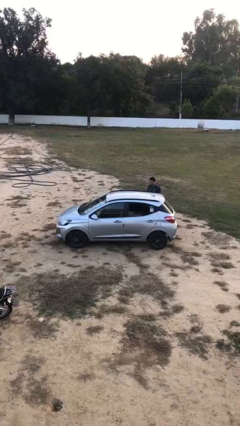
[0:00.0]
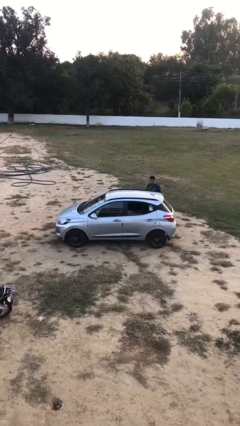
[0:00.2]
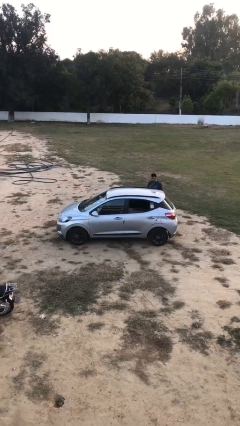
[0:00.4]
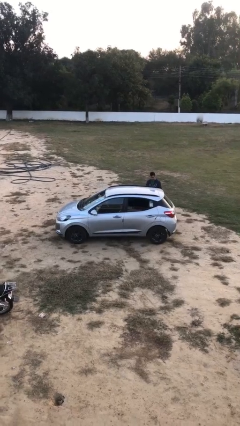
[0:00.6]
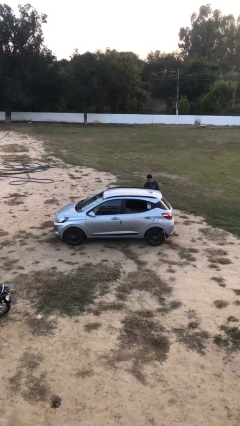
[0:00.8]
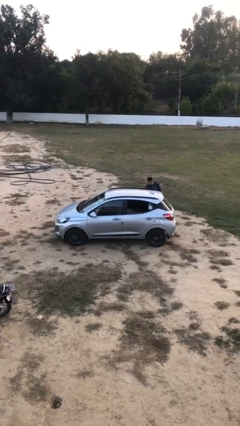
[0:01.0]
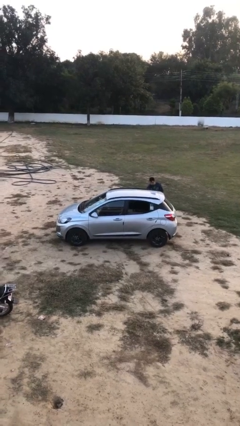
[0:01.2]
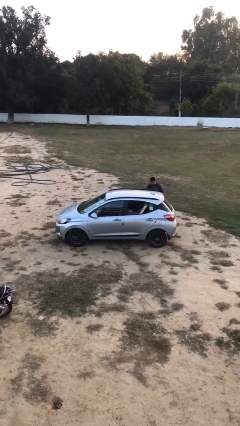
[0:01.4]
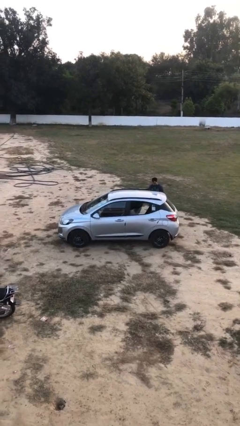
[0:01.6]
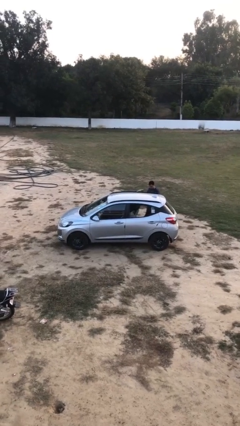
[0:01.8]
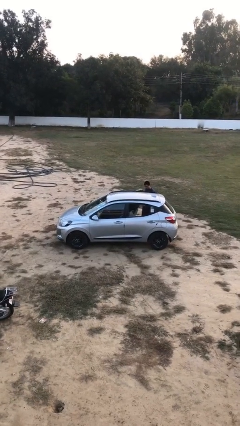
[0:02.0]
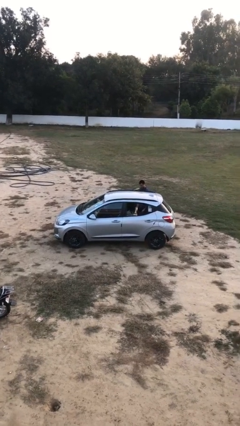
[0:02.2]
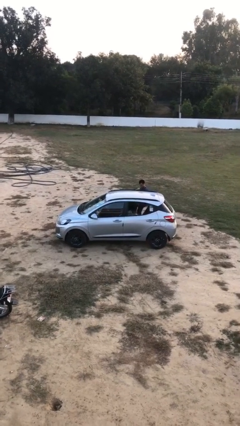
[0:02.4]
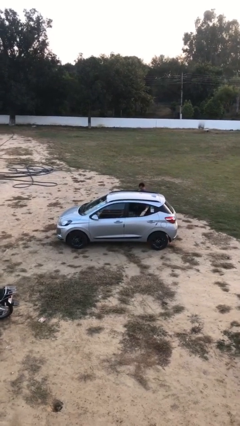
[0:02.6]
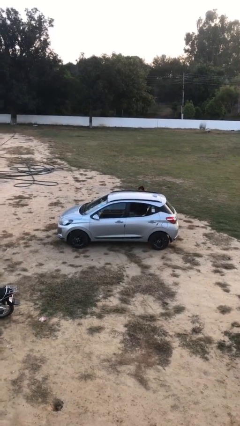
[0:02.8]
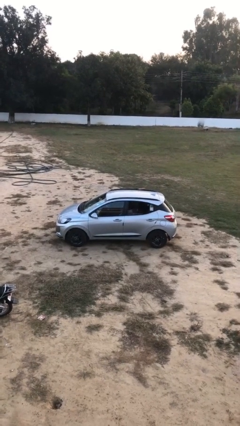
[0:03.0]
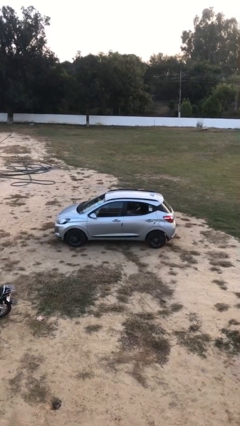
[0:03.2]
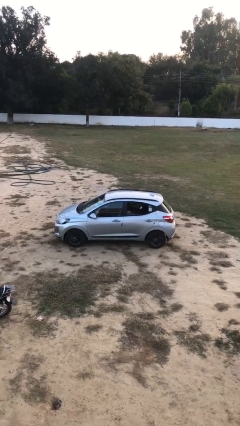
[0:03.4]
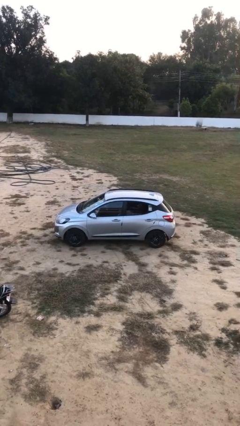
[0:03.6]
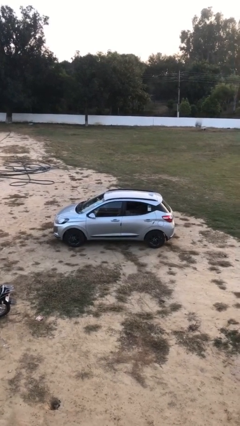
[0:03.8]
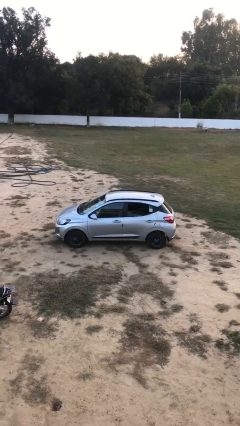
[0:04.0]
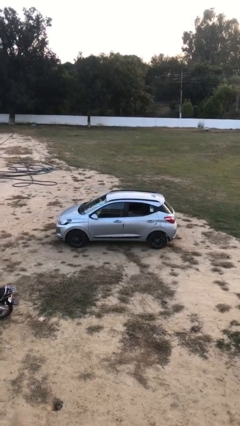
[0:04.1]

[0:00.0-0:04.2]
car picks up person

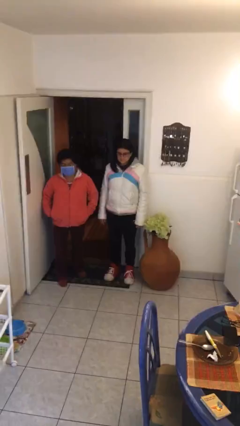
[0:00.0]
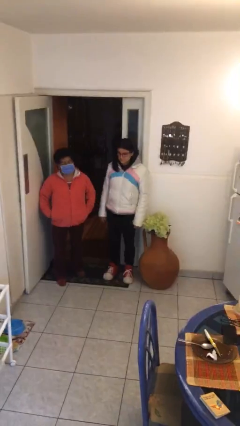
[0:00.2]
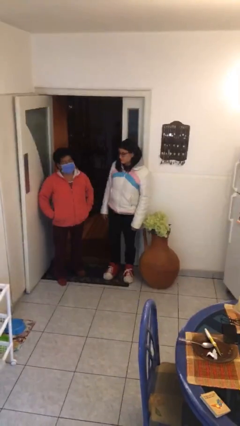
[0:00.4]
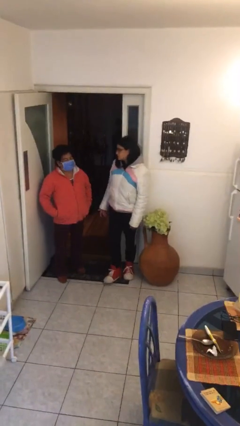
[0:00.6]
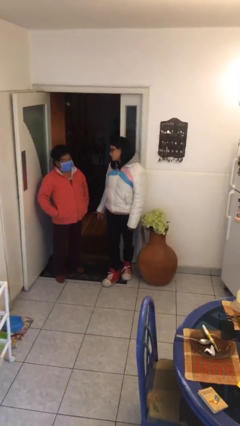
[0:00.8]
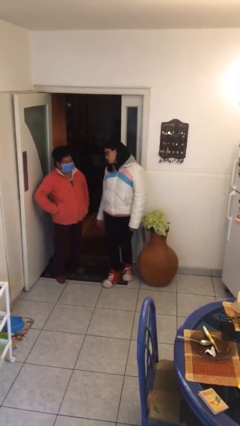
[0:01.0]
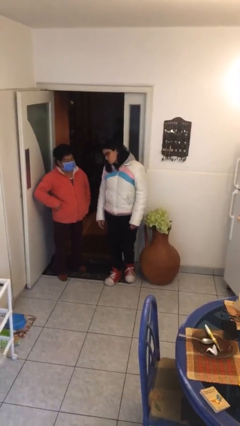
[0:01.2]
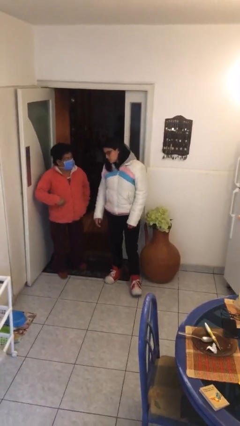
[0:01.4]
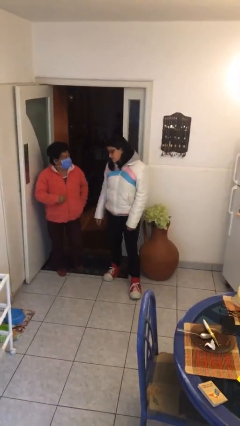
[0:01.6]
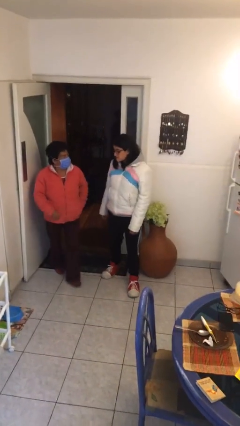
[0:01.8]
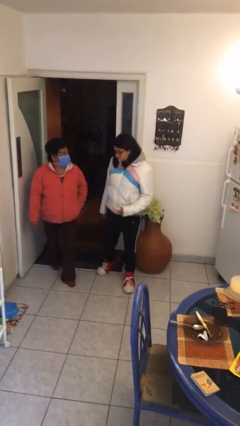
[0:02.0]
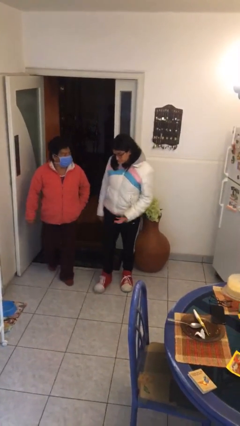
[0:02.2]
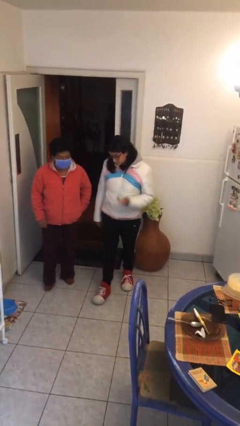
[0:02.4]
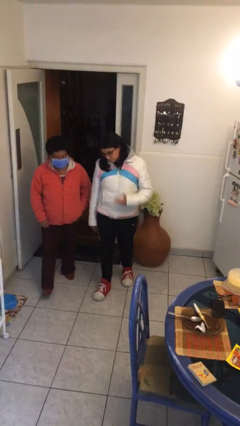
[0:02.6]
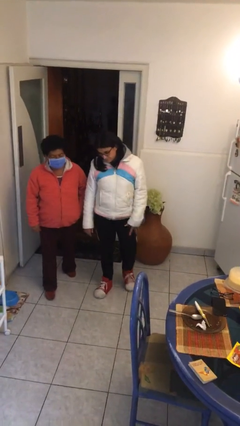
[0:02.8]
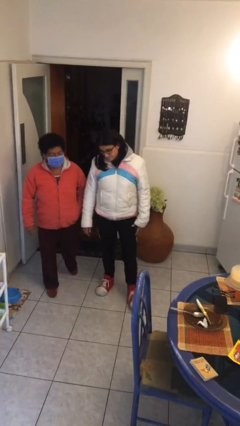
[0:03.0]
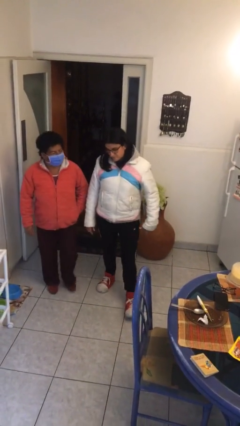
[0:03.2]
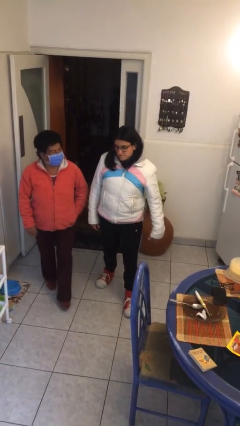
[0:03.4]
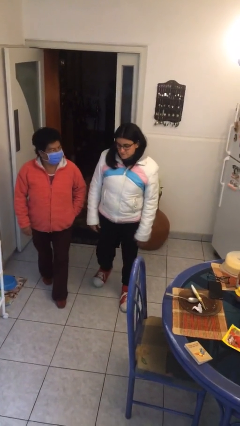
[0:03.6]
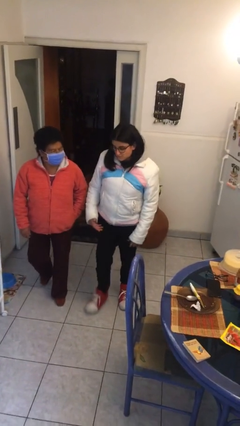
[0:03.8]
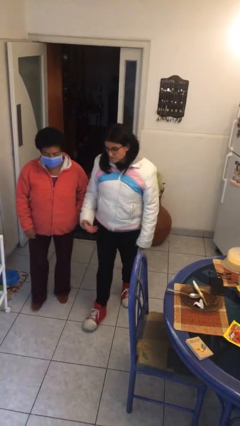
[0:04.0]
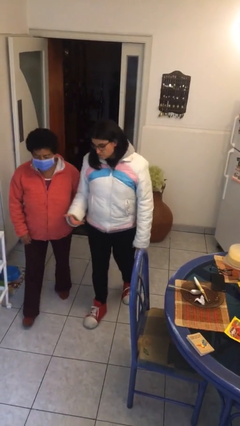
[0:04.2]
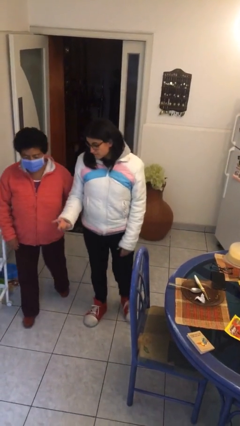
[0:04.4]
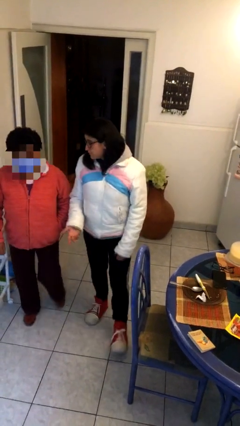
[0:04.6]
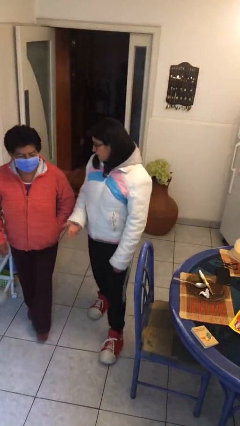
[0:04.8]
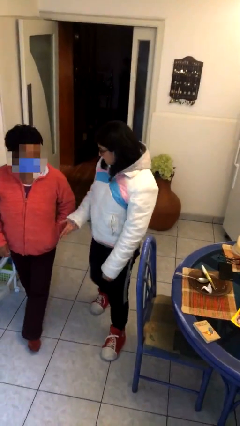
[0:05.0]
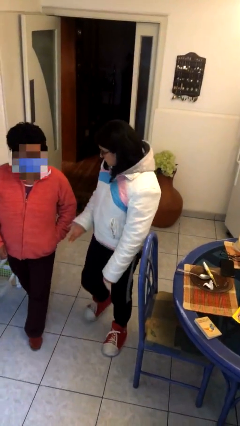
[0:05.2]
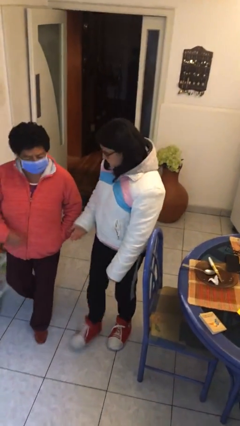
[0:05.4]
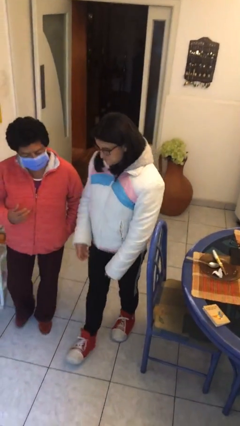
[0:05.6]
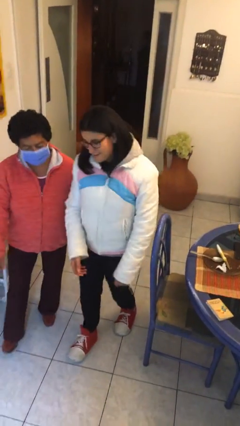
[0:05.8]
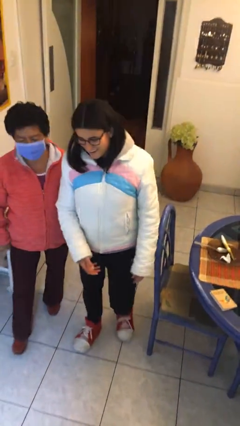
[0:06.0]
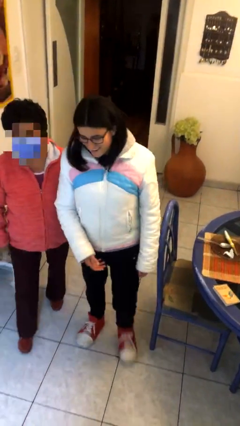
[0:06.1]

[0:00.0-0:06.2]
person talks to person

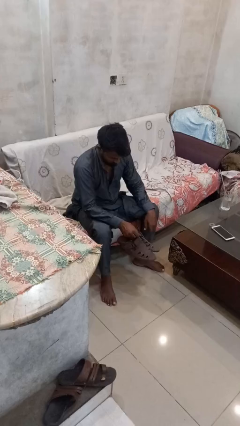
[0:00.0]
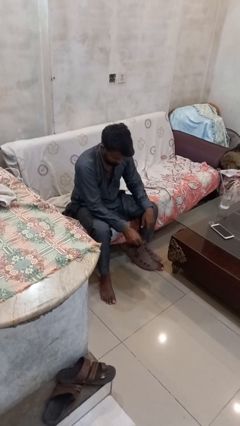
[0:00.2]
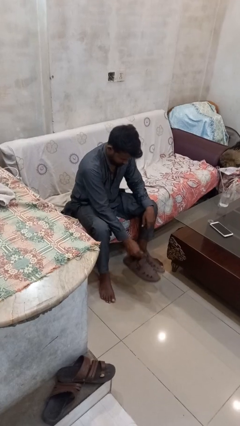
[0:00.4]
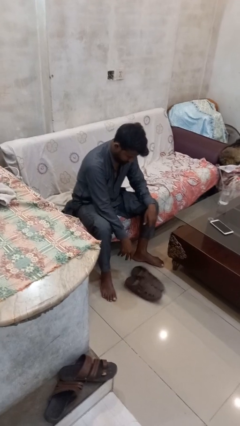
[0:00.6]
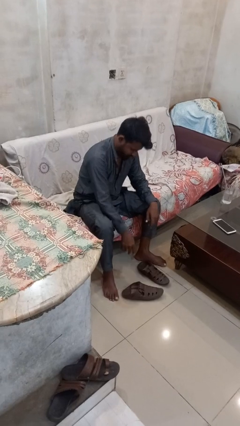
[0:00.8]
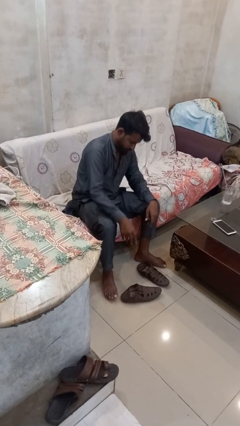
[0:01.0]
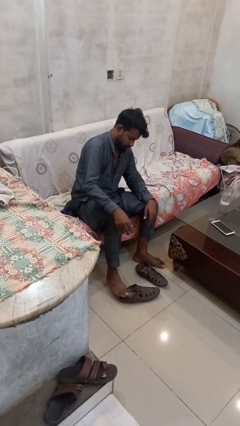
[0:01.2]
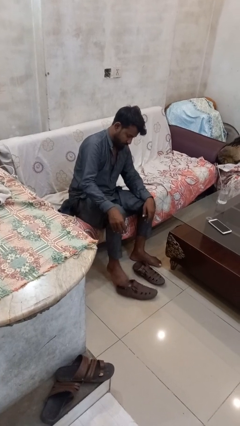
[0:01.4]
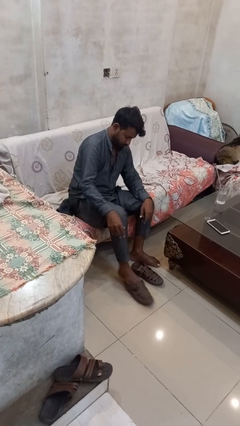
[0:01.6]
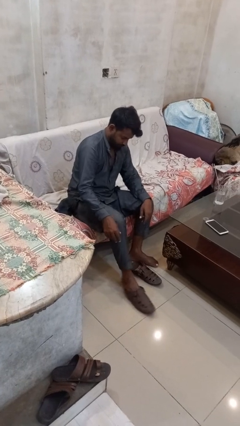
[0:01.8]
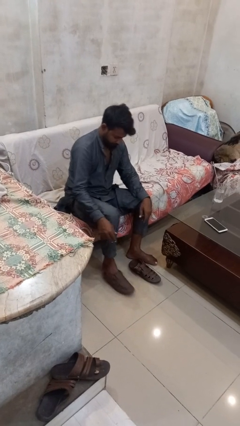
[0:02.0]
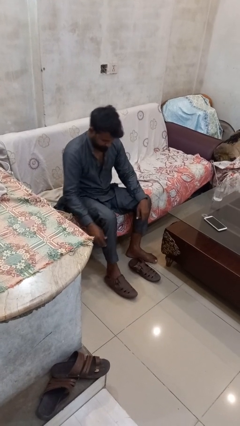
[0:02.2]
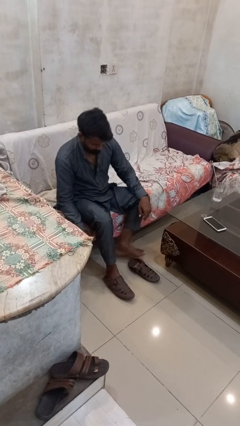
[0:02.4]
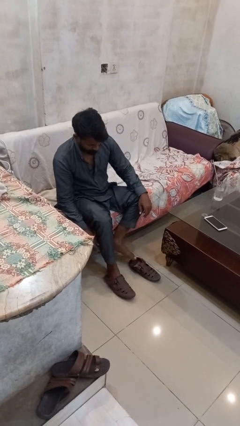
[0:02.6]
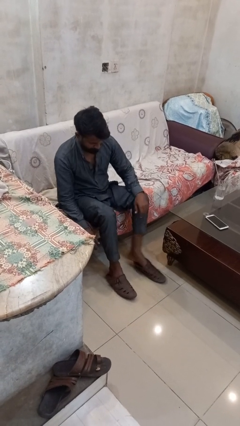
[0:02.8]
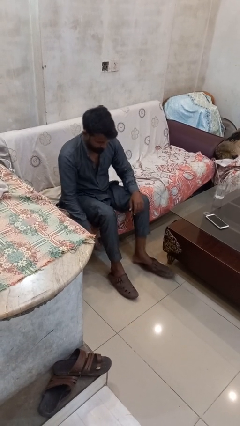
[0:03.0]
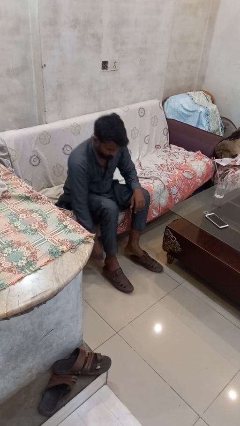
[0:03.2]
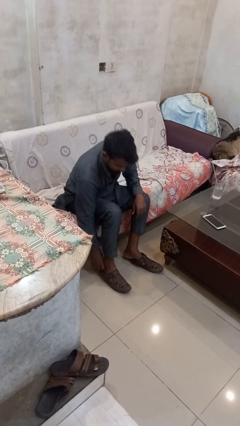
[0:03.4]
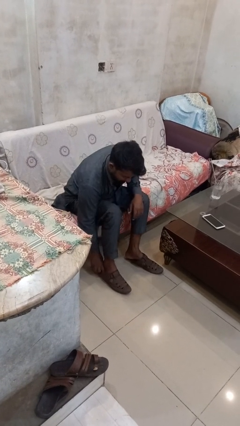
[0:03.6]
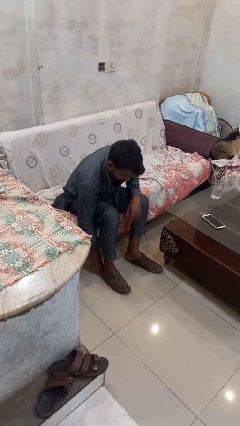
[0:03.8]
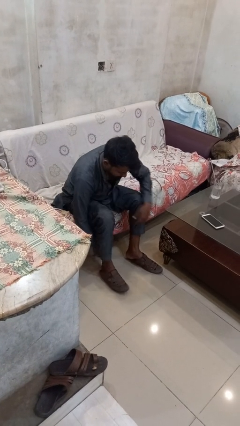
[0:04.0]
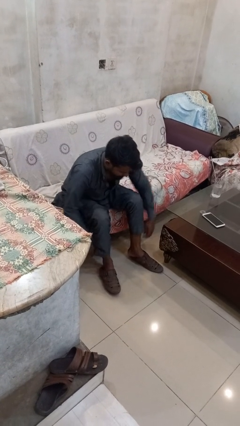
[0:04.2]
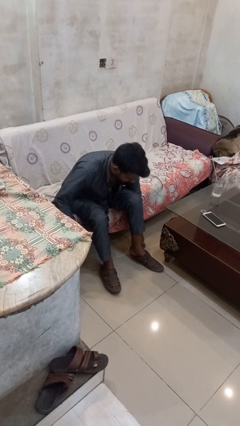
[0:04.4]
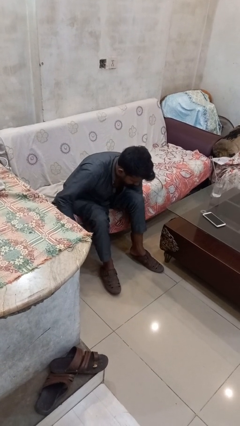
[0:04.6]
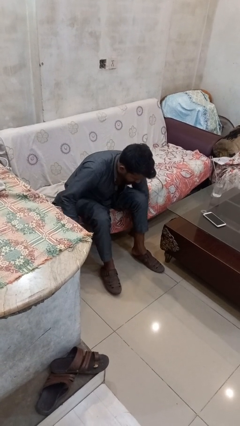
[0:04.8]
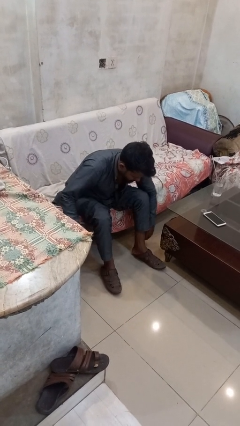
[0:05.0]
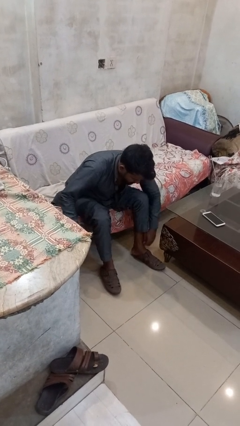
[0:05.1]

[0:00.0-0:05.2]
person puts on shoes

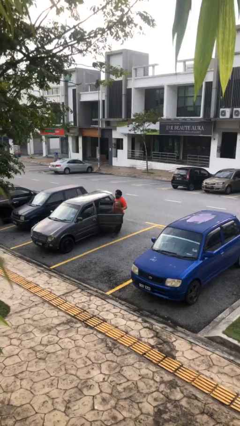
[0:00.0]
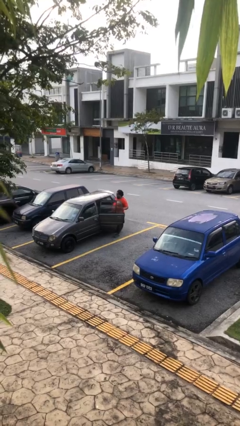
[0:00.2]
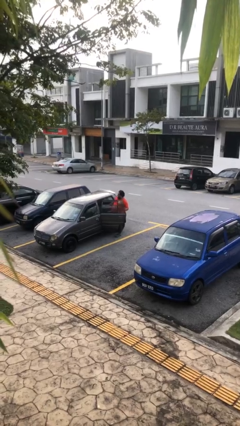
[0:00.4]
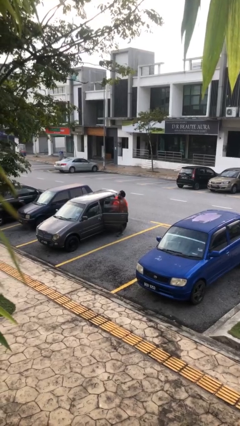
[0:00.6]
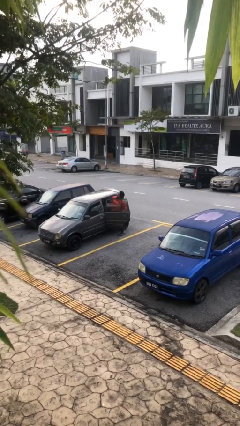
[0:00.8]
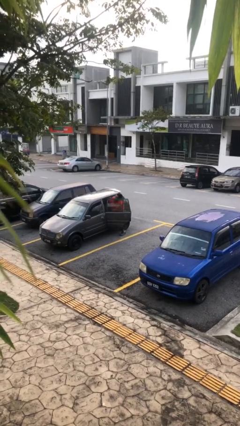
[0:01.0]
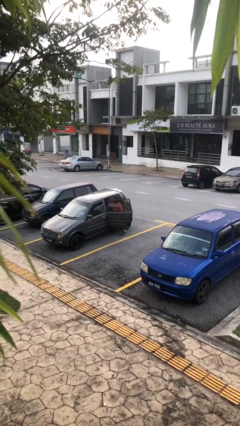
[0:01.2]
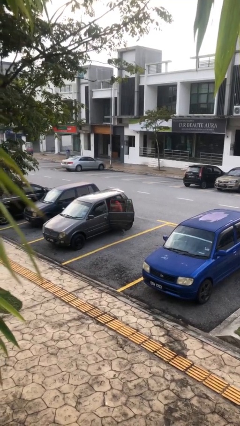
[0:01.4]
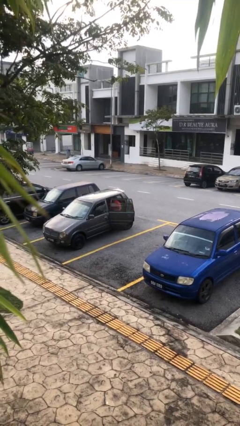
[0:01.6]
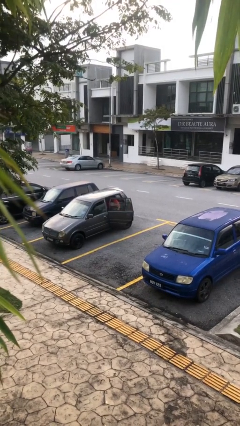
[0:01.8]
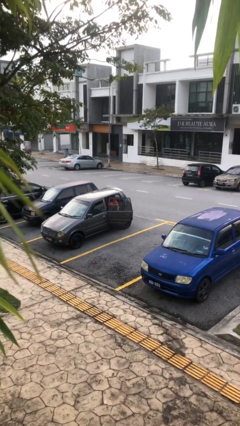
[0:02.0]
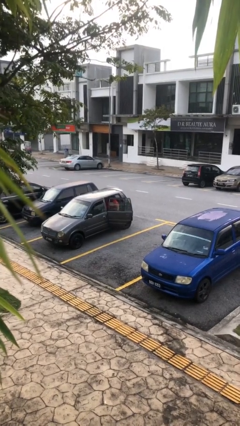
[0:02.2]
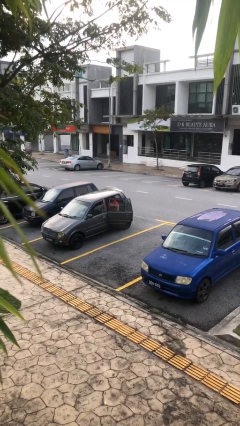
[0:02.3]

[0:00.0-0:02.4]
person enters car
